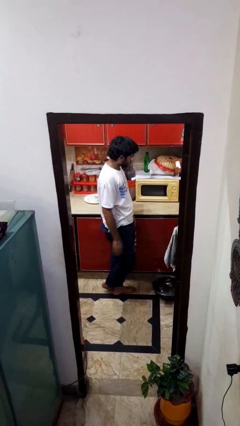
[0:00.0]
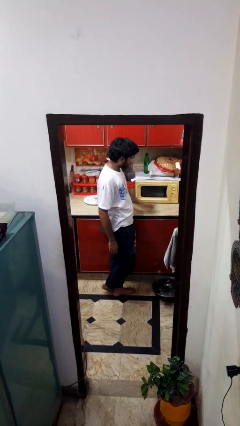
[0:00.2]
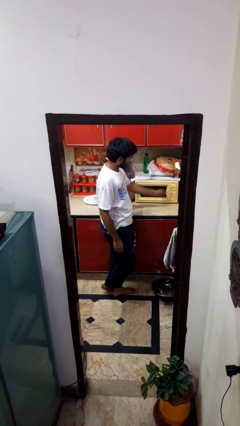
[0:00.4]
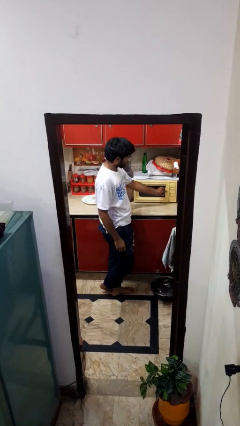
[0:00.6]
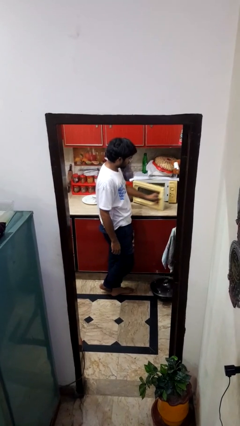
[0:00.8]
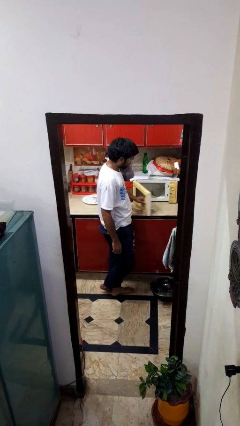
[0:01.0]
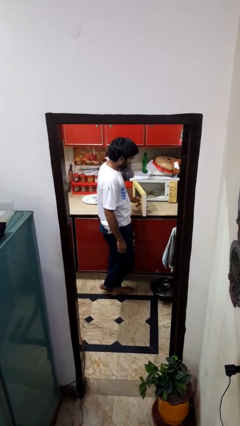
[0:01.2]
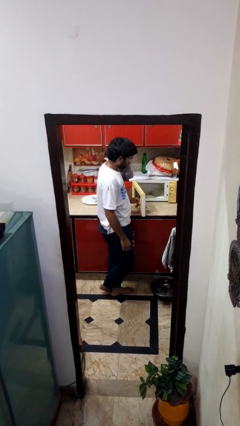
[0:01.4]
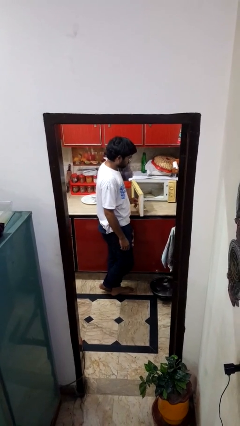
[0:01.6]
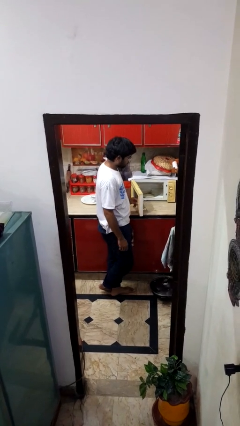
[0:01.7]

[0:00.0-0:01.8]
person opens oven door

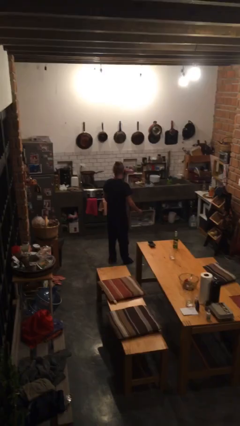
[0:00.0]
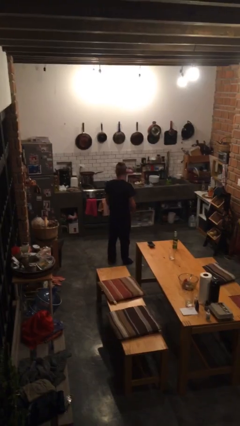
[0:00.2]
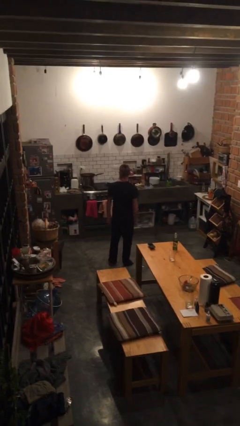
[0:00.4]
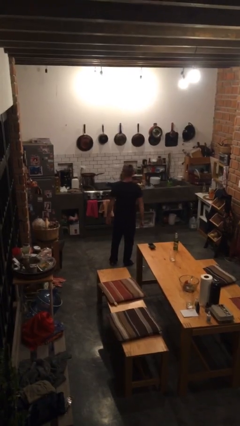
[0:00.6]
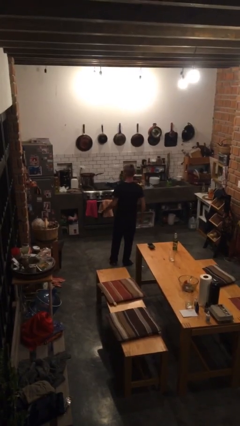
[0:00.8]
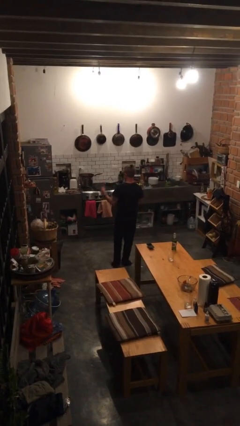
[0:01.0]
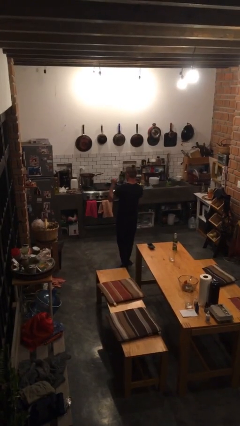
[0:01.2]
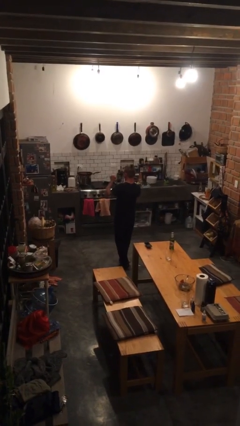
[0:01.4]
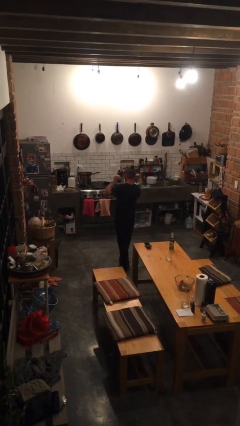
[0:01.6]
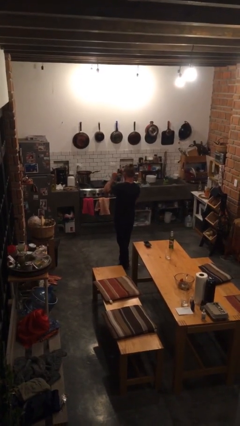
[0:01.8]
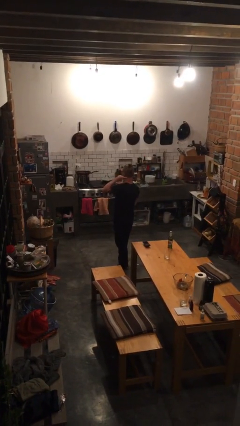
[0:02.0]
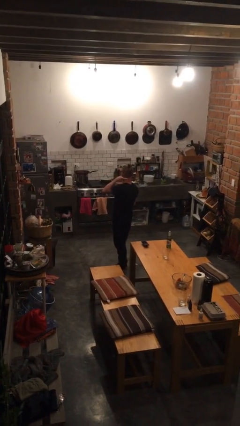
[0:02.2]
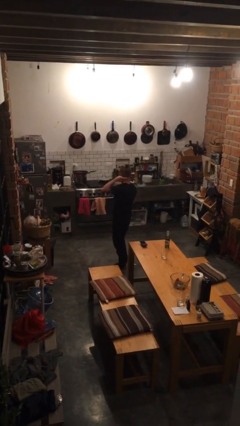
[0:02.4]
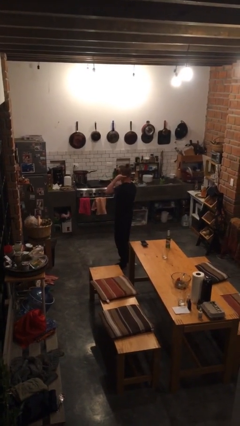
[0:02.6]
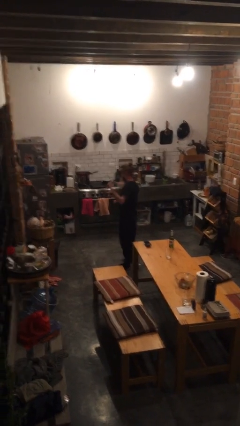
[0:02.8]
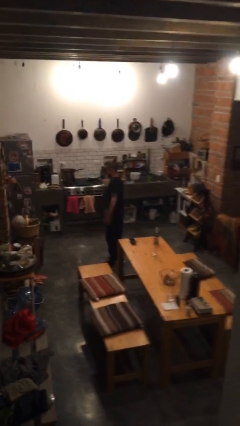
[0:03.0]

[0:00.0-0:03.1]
person gestures behind me

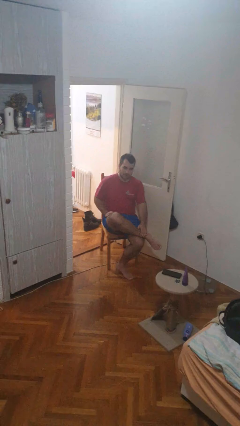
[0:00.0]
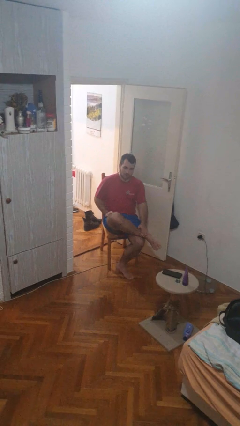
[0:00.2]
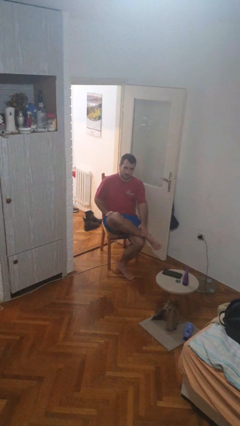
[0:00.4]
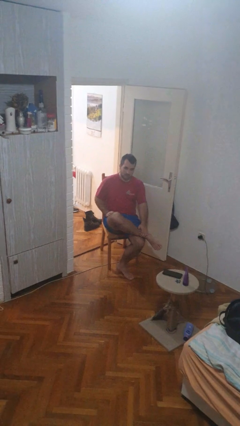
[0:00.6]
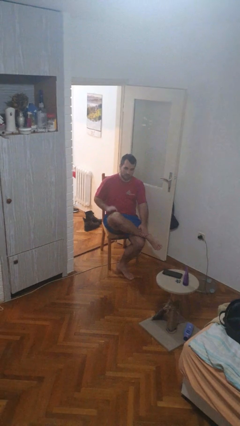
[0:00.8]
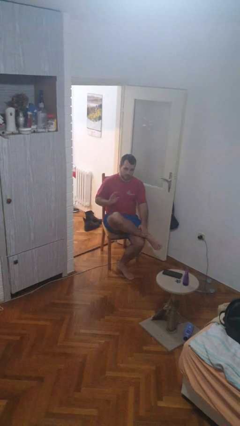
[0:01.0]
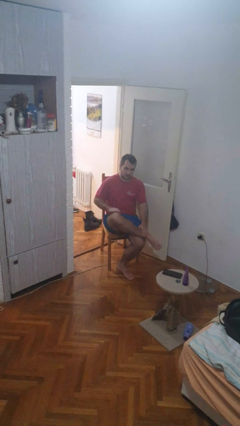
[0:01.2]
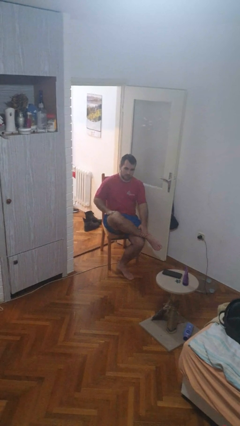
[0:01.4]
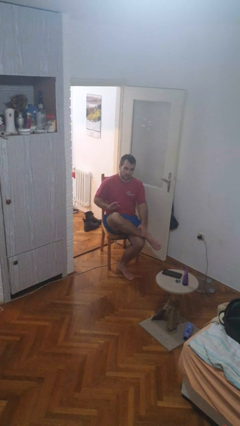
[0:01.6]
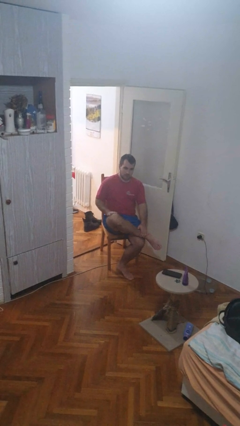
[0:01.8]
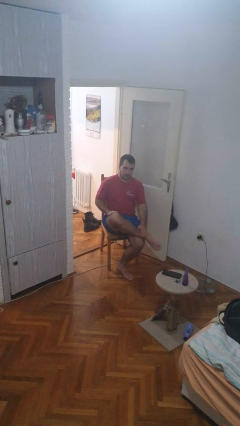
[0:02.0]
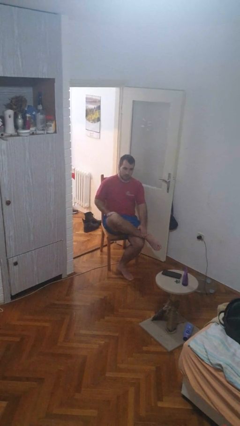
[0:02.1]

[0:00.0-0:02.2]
person slaps hands on thighs

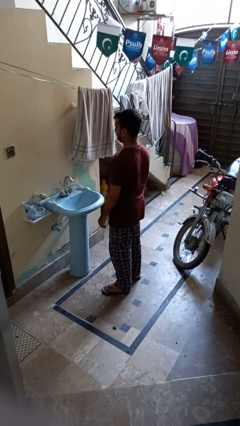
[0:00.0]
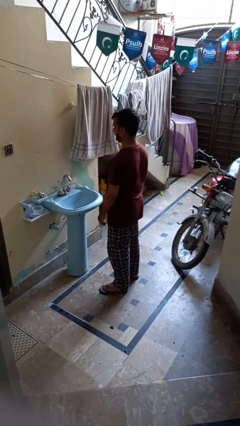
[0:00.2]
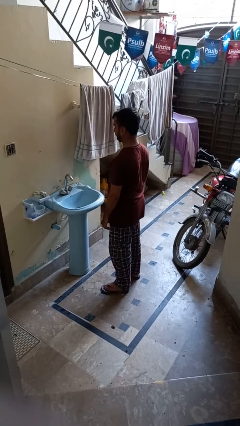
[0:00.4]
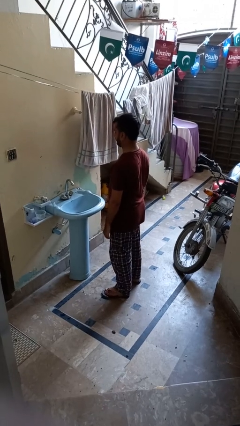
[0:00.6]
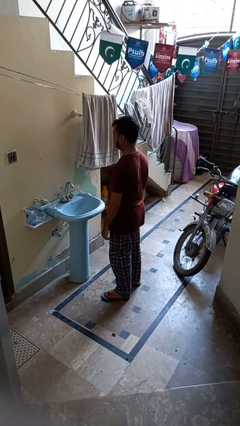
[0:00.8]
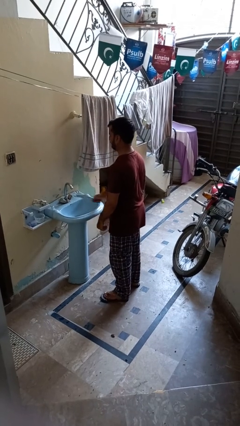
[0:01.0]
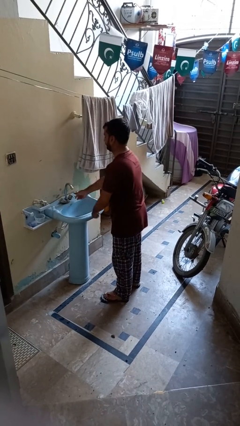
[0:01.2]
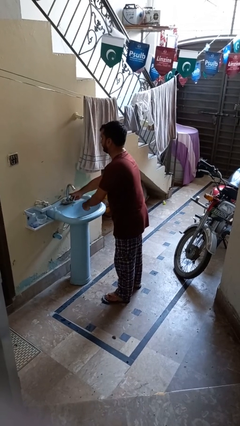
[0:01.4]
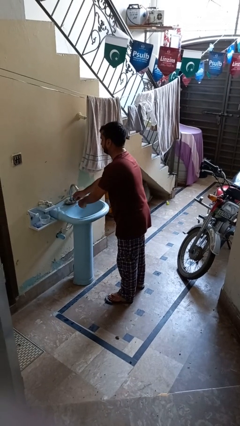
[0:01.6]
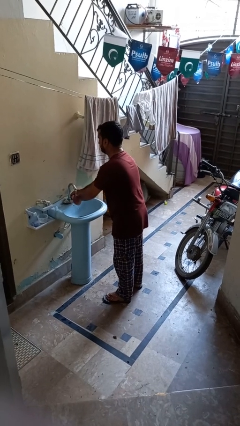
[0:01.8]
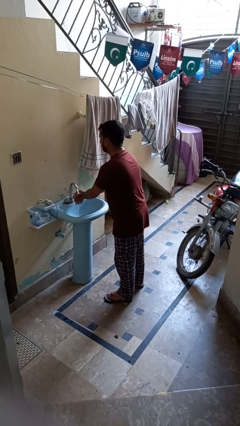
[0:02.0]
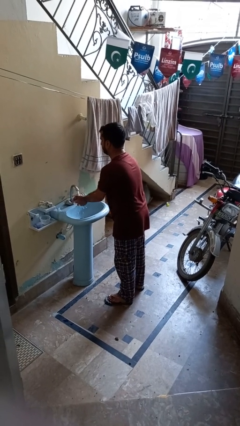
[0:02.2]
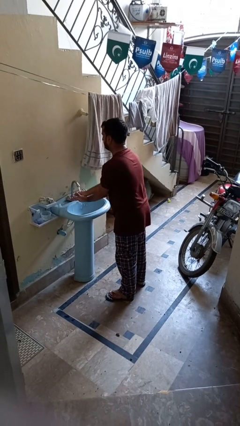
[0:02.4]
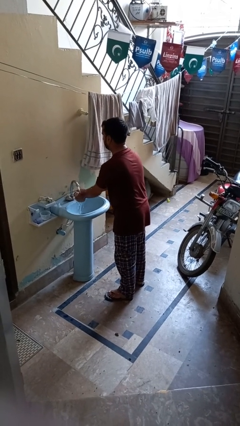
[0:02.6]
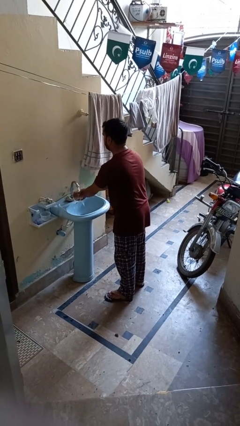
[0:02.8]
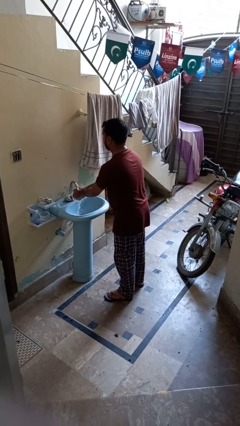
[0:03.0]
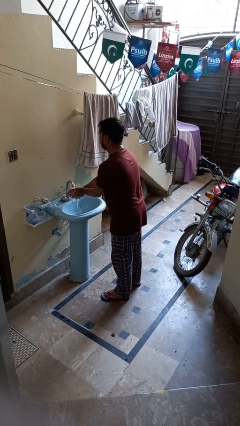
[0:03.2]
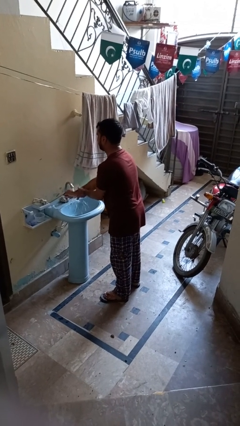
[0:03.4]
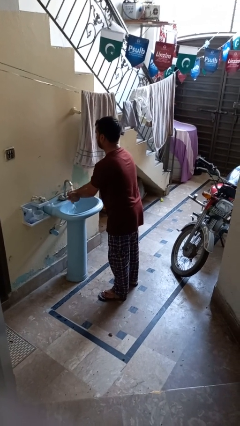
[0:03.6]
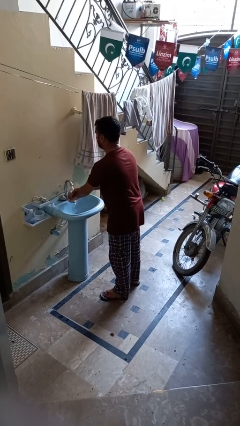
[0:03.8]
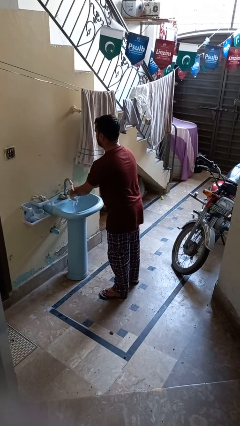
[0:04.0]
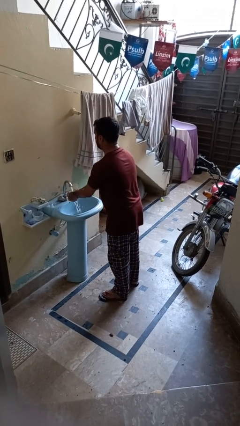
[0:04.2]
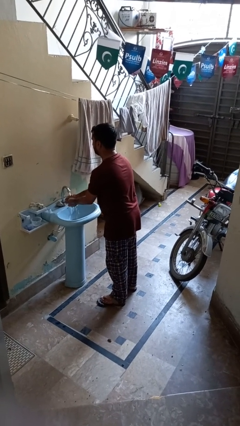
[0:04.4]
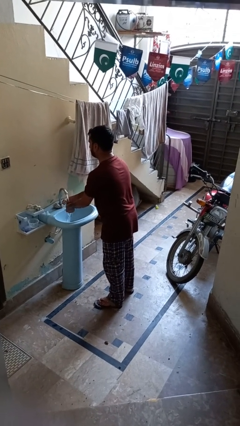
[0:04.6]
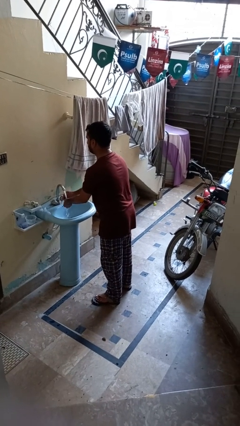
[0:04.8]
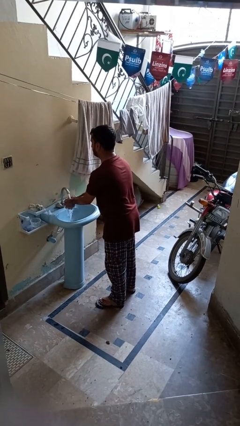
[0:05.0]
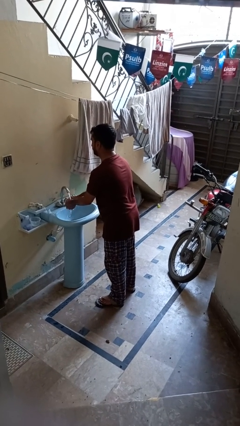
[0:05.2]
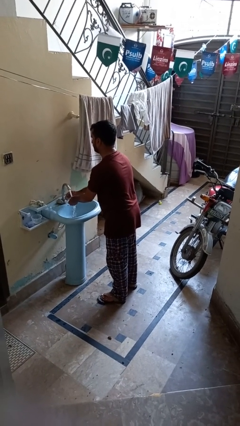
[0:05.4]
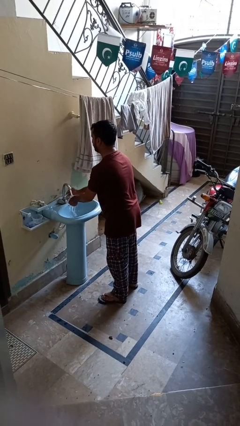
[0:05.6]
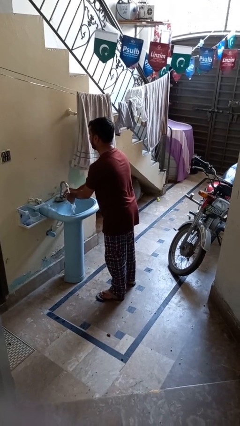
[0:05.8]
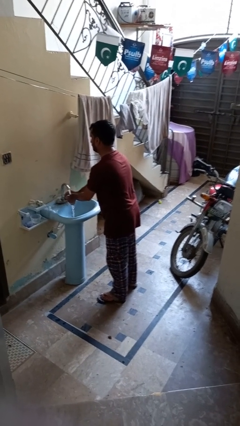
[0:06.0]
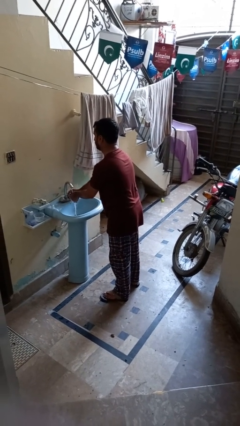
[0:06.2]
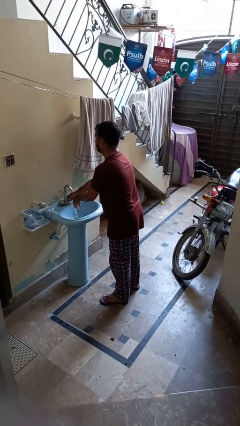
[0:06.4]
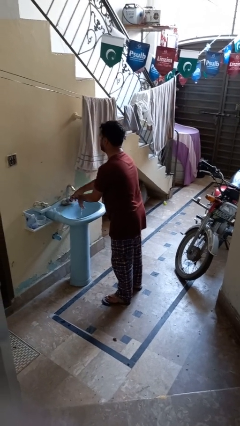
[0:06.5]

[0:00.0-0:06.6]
person washes hands

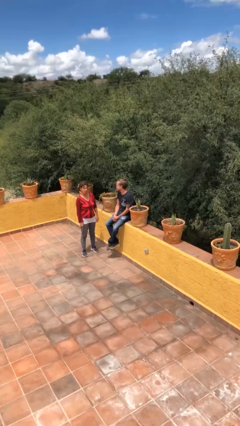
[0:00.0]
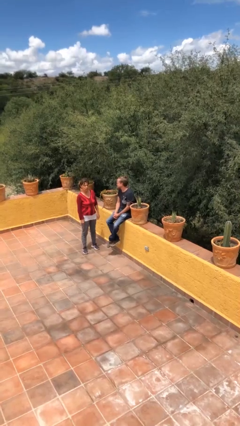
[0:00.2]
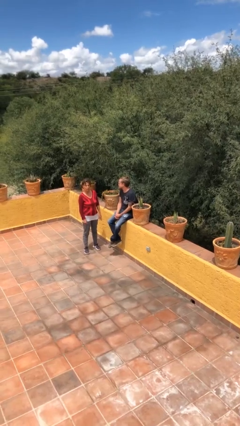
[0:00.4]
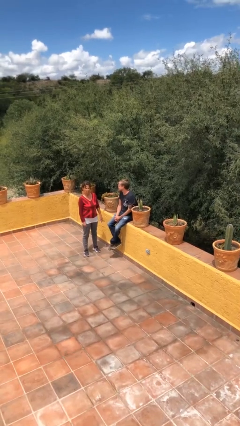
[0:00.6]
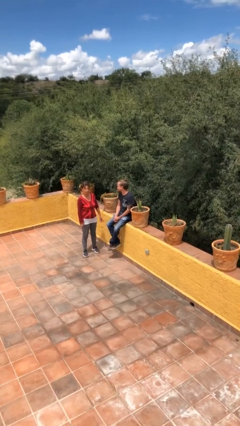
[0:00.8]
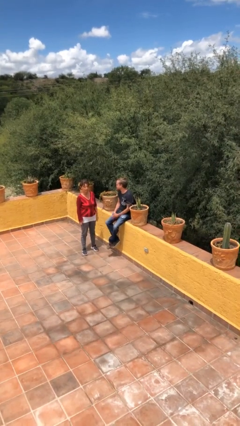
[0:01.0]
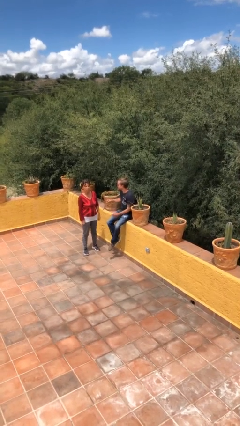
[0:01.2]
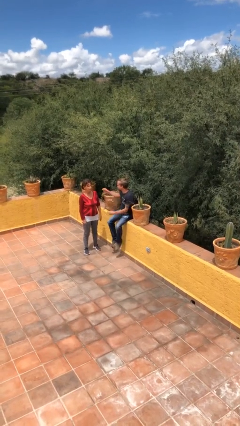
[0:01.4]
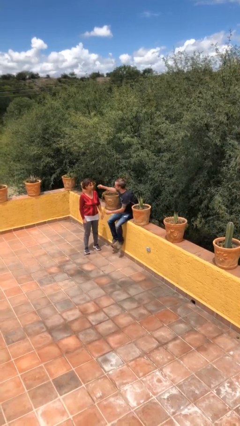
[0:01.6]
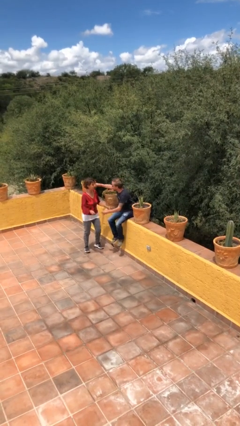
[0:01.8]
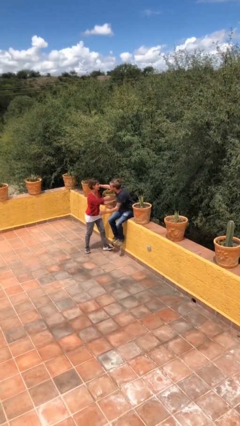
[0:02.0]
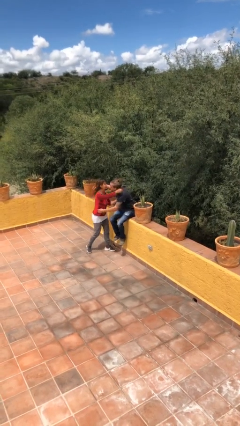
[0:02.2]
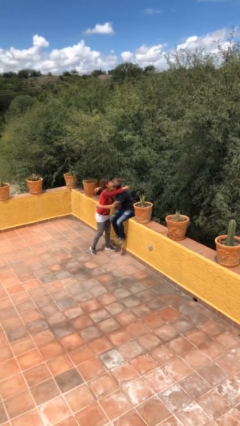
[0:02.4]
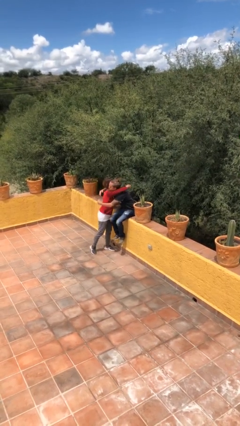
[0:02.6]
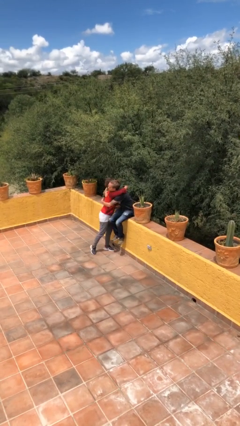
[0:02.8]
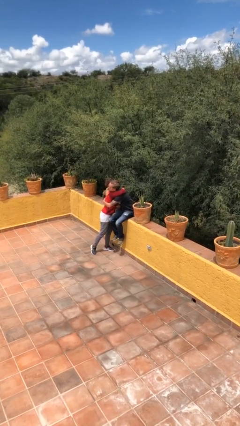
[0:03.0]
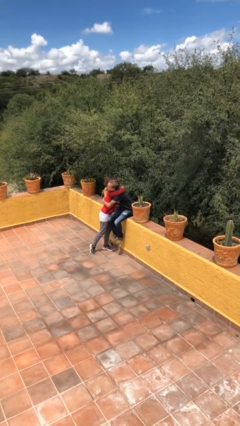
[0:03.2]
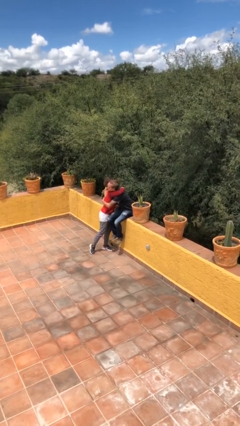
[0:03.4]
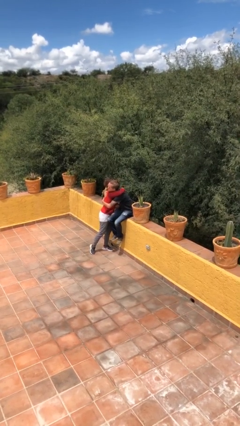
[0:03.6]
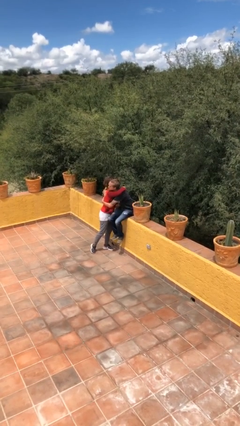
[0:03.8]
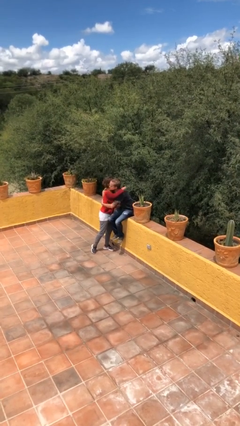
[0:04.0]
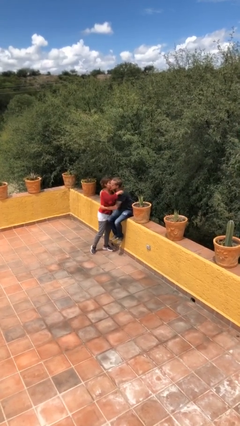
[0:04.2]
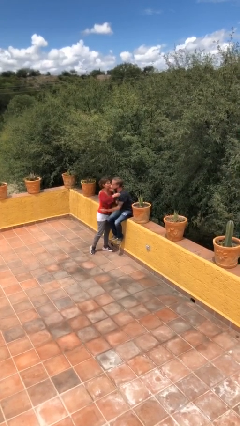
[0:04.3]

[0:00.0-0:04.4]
person embraces person
